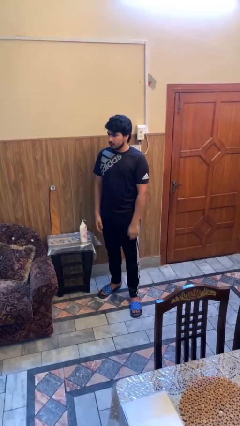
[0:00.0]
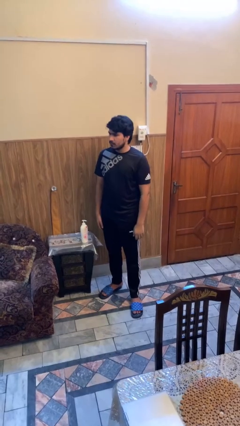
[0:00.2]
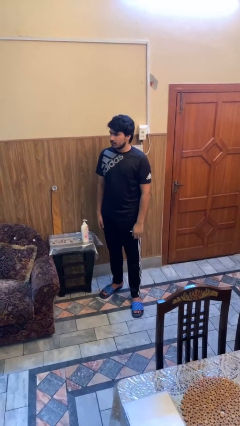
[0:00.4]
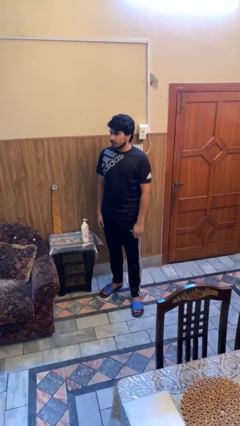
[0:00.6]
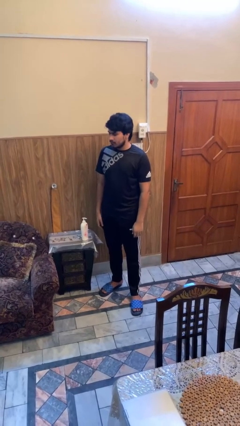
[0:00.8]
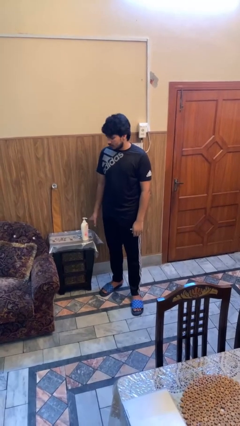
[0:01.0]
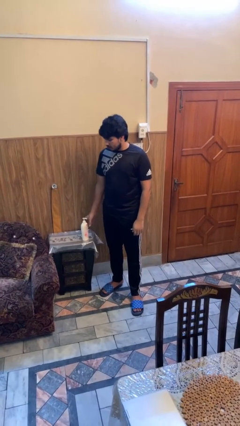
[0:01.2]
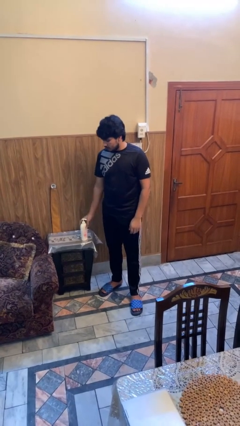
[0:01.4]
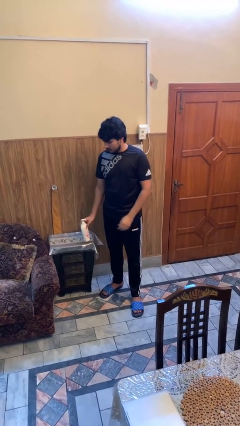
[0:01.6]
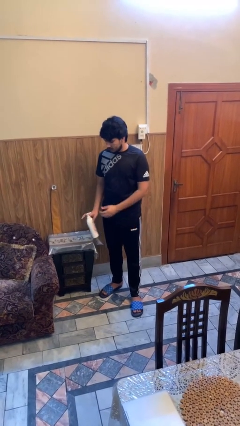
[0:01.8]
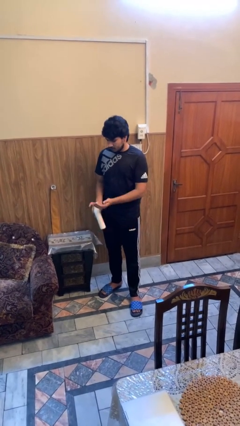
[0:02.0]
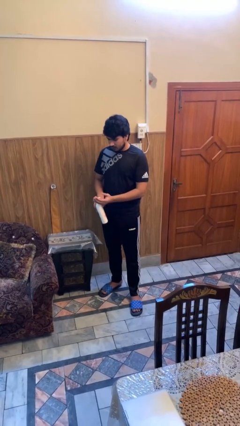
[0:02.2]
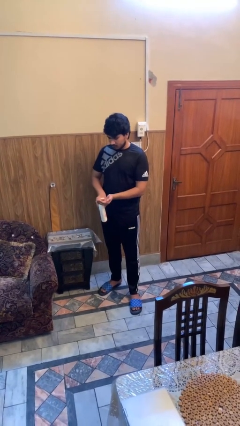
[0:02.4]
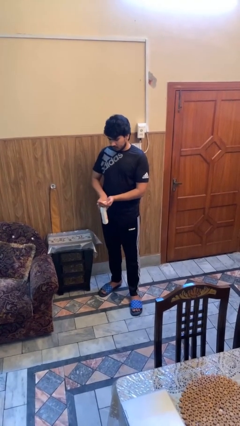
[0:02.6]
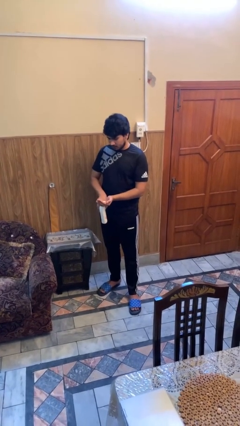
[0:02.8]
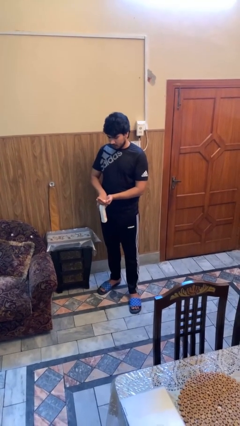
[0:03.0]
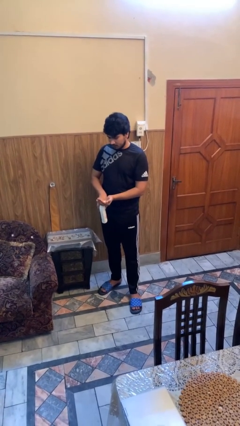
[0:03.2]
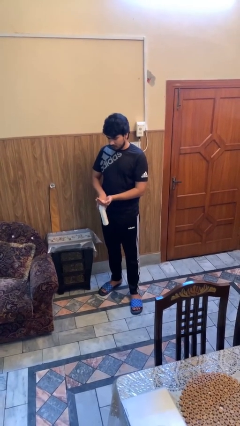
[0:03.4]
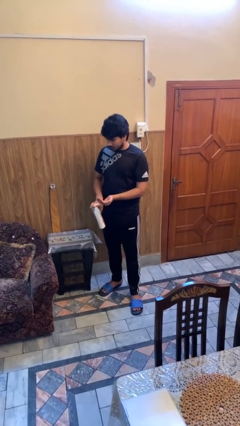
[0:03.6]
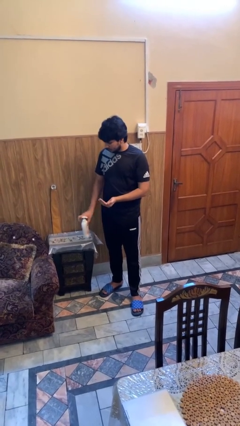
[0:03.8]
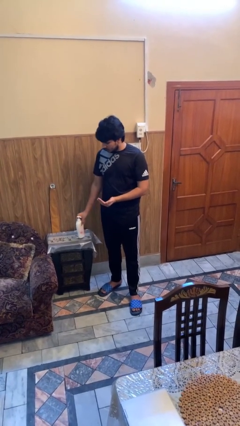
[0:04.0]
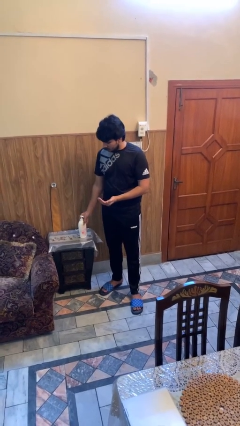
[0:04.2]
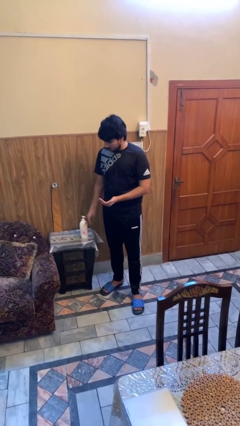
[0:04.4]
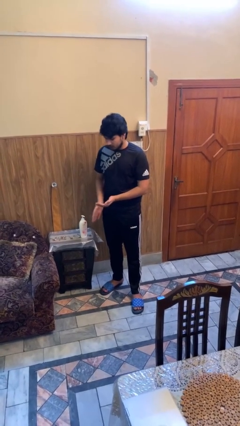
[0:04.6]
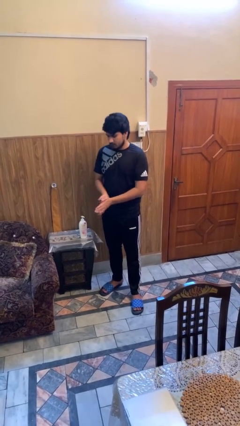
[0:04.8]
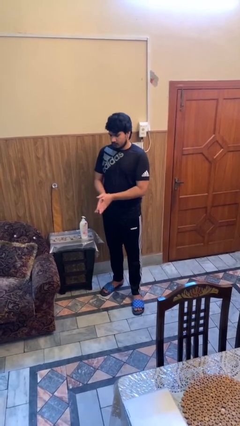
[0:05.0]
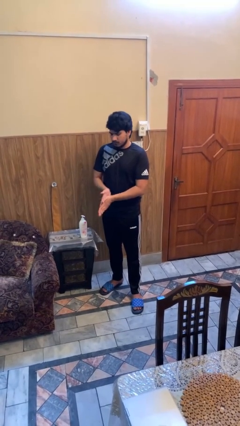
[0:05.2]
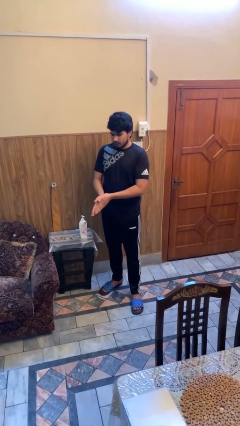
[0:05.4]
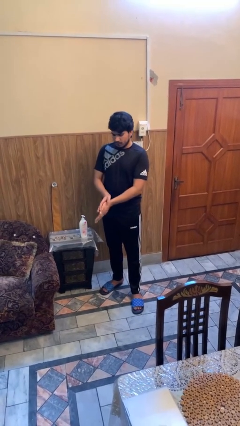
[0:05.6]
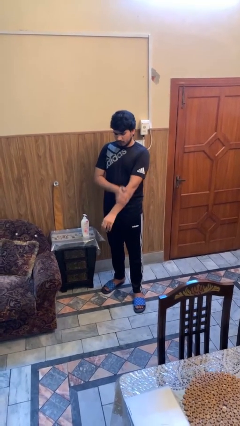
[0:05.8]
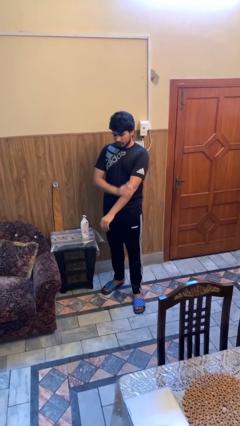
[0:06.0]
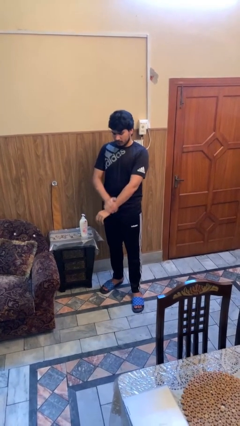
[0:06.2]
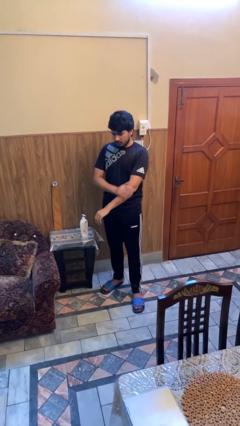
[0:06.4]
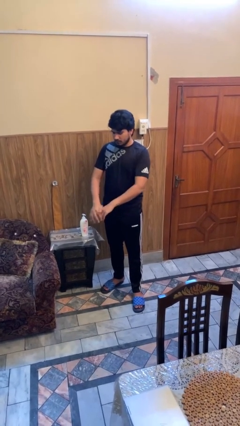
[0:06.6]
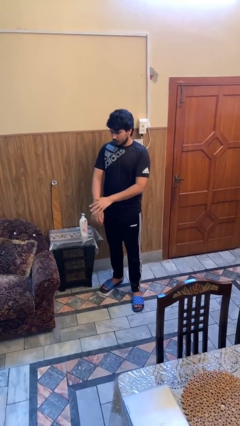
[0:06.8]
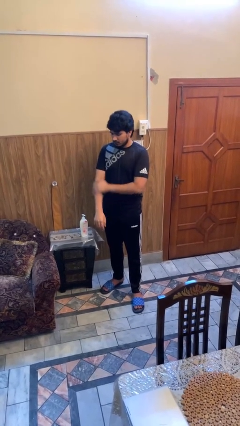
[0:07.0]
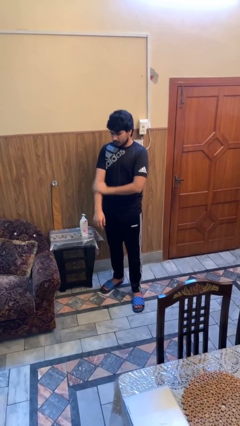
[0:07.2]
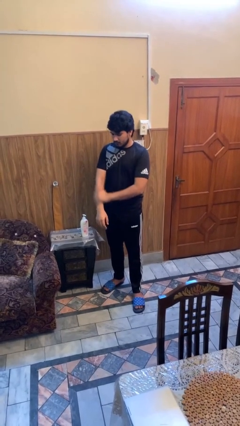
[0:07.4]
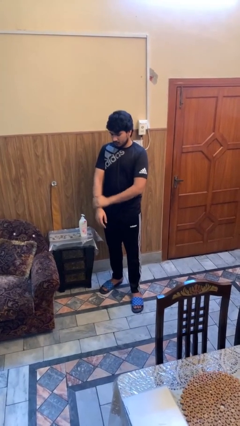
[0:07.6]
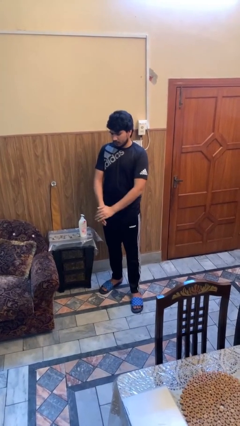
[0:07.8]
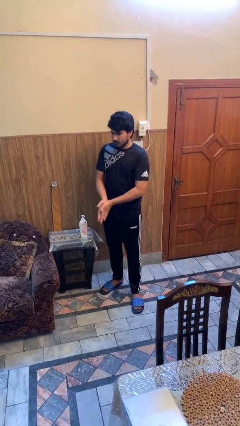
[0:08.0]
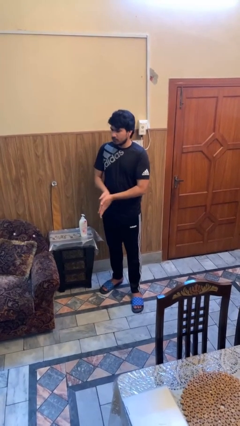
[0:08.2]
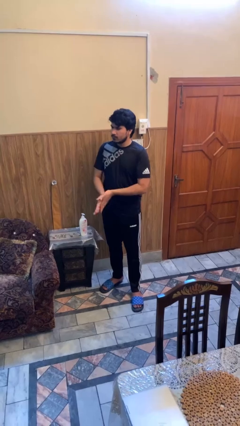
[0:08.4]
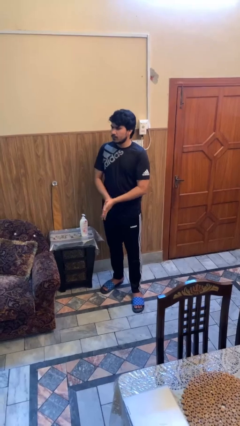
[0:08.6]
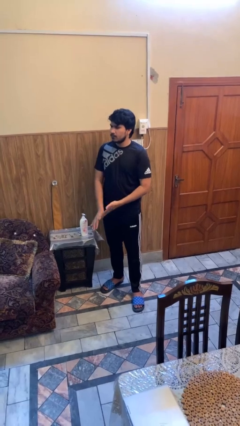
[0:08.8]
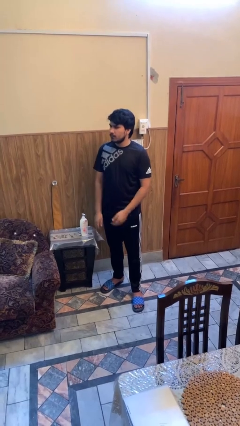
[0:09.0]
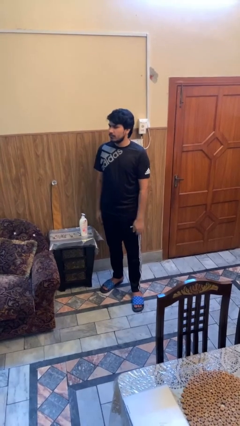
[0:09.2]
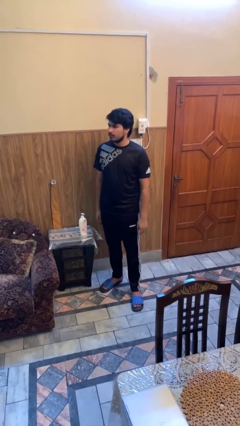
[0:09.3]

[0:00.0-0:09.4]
person applies sunscreen

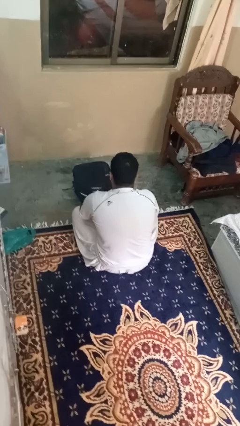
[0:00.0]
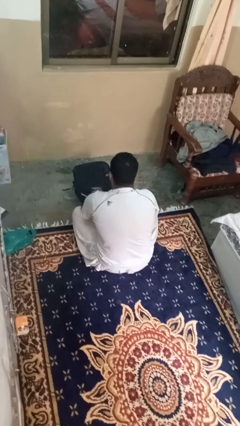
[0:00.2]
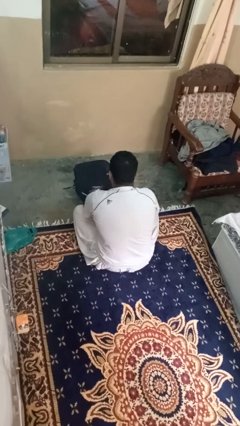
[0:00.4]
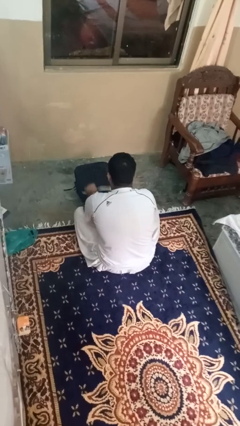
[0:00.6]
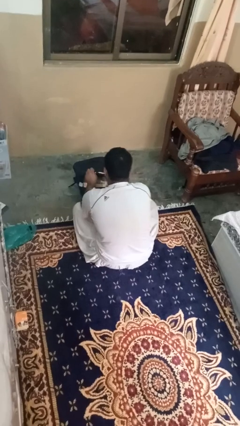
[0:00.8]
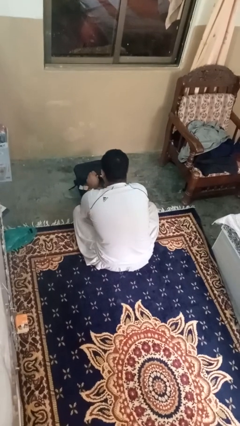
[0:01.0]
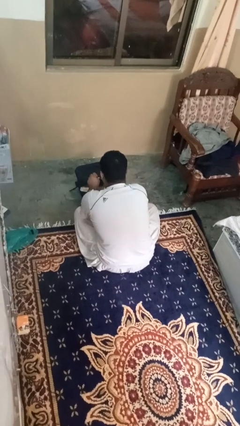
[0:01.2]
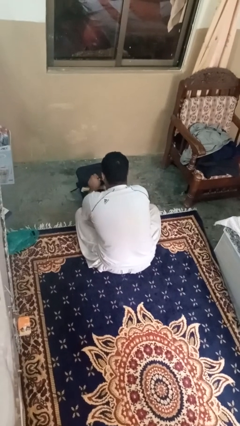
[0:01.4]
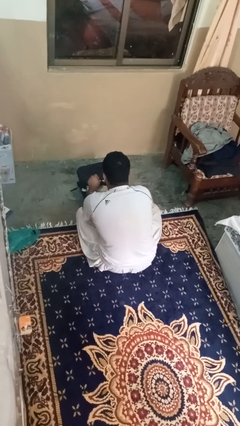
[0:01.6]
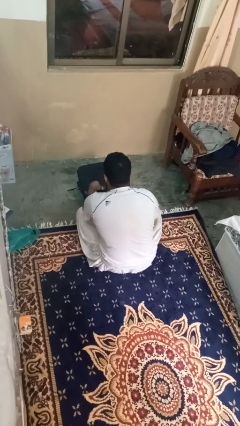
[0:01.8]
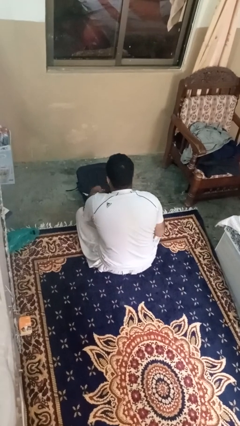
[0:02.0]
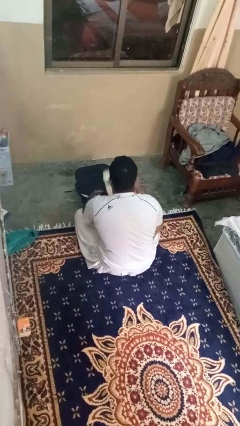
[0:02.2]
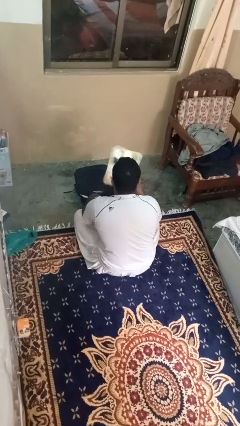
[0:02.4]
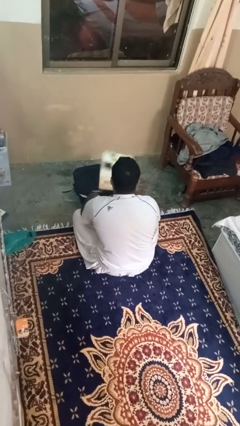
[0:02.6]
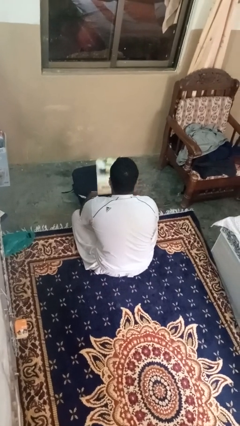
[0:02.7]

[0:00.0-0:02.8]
person takes object from bag

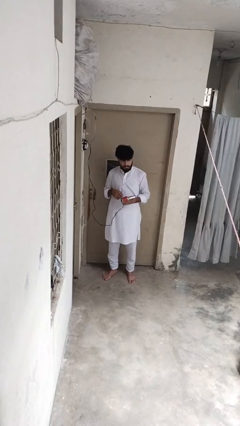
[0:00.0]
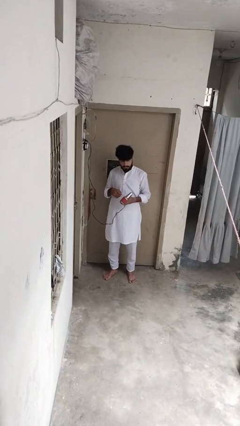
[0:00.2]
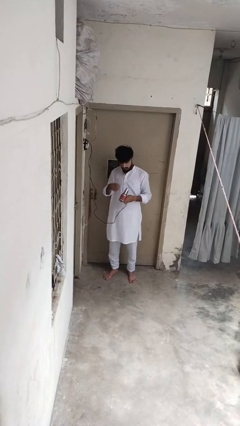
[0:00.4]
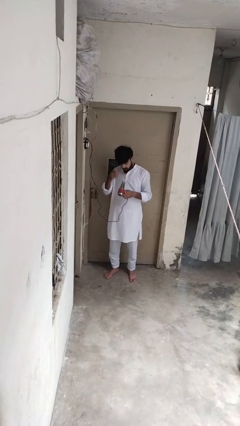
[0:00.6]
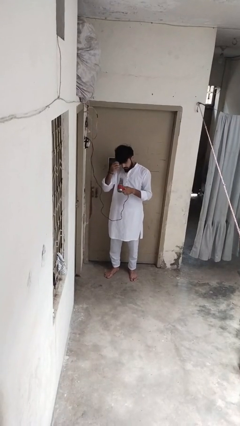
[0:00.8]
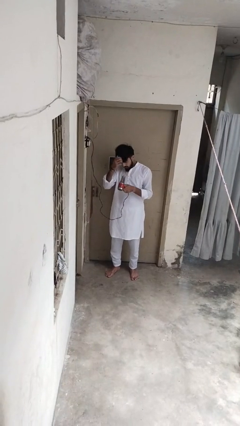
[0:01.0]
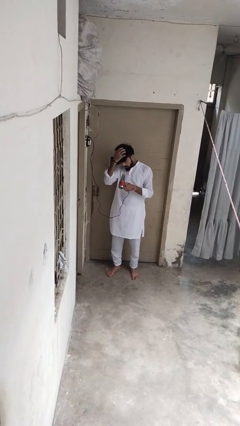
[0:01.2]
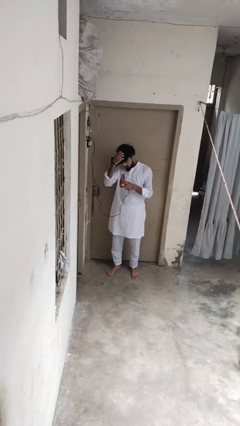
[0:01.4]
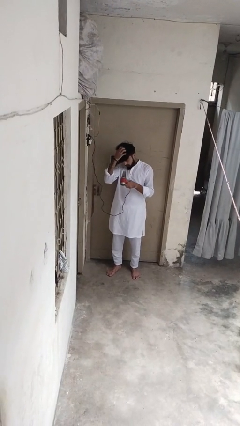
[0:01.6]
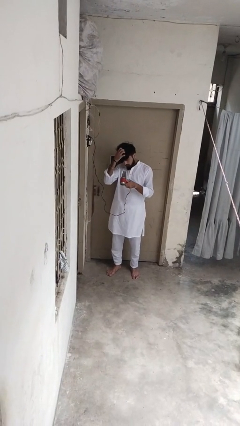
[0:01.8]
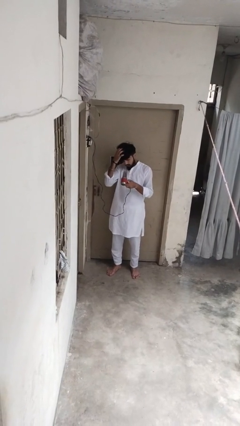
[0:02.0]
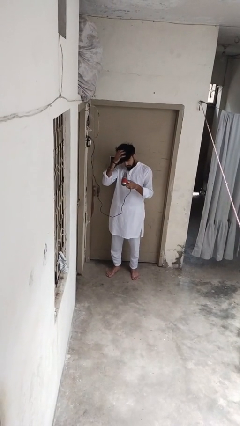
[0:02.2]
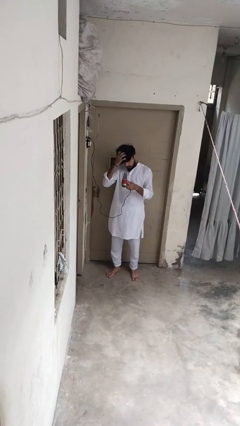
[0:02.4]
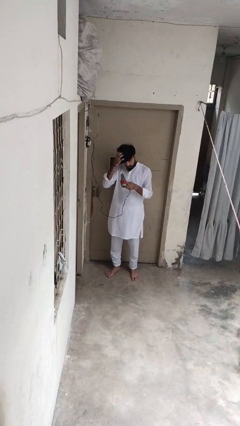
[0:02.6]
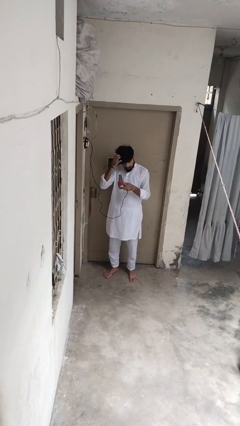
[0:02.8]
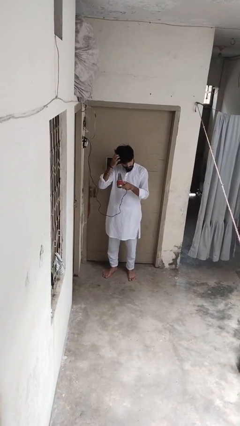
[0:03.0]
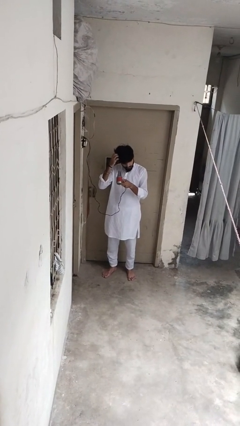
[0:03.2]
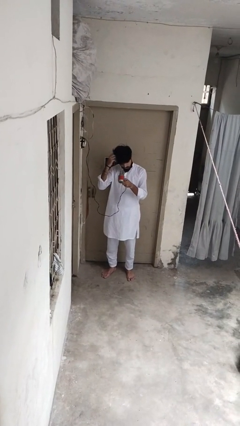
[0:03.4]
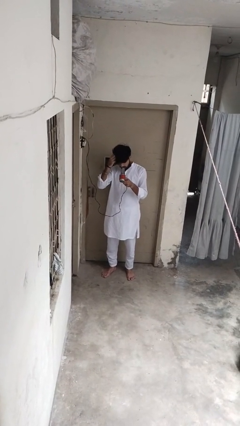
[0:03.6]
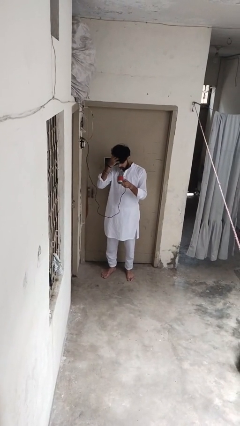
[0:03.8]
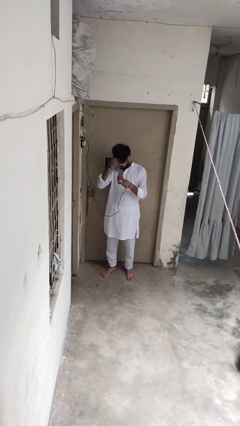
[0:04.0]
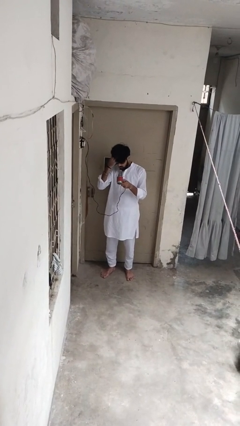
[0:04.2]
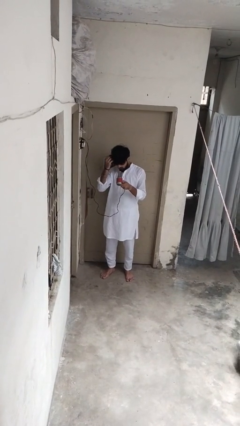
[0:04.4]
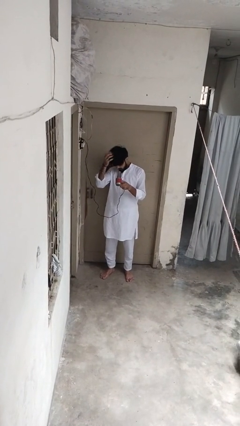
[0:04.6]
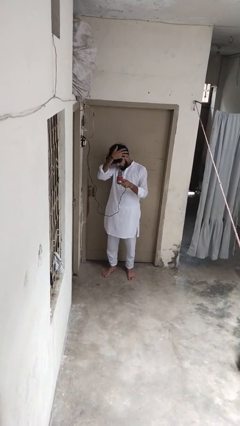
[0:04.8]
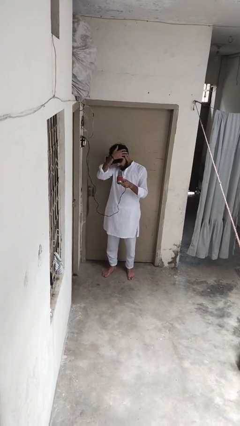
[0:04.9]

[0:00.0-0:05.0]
person dries hair with hairdryer

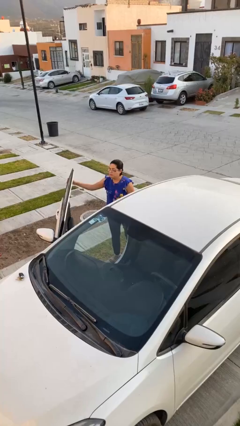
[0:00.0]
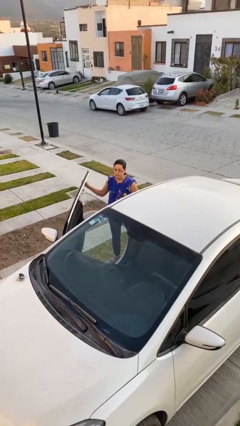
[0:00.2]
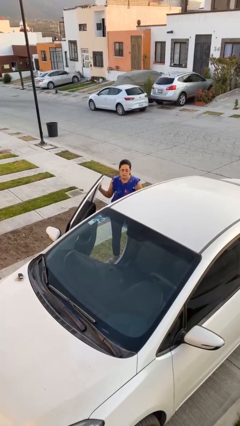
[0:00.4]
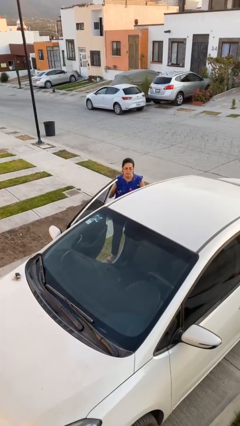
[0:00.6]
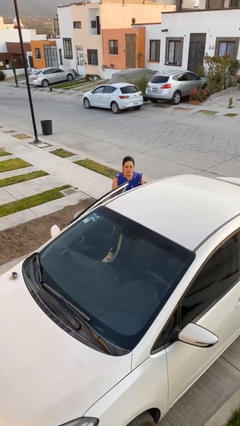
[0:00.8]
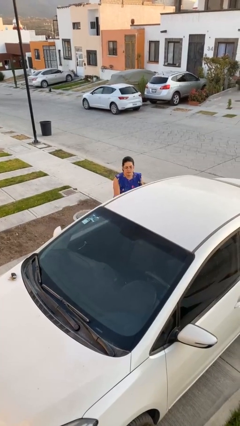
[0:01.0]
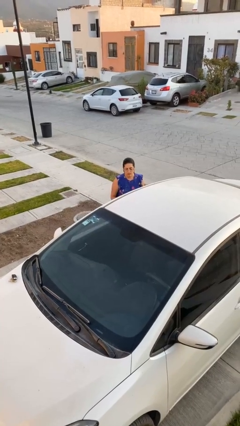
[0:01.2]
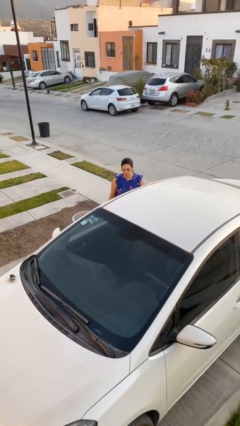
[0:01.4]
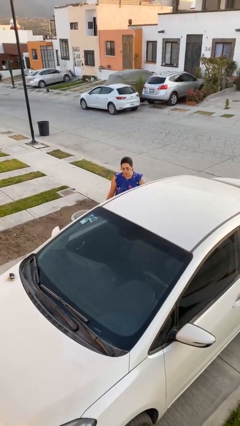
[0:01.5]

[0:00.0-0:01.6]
person closes car door
